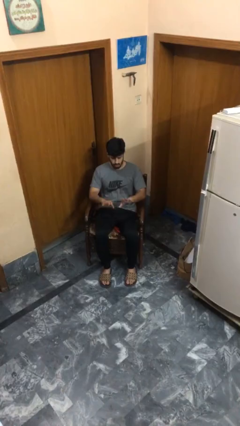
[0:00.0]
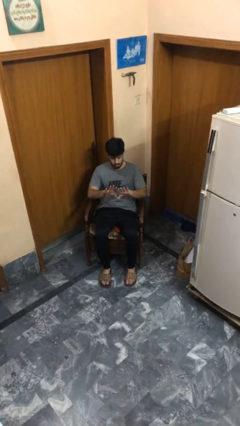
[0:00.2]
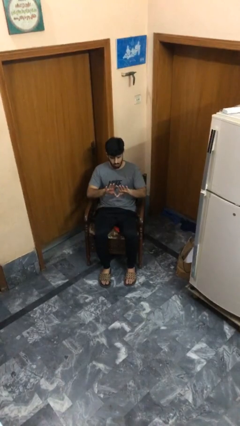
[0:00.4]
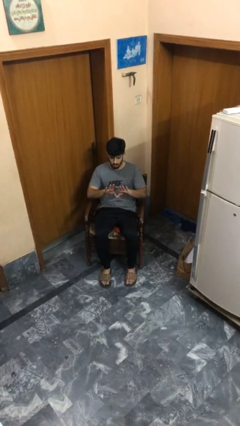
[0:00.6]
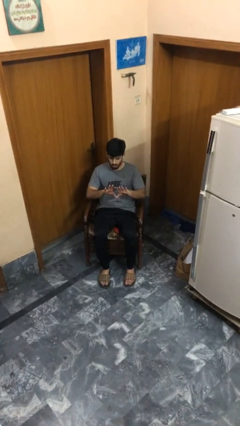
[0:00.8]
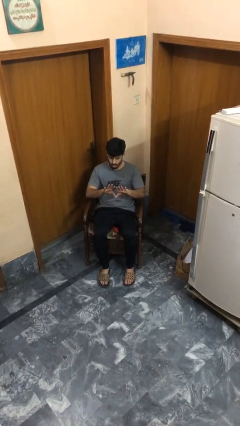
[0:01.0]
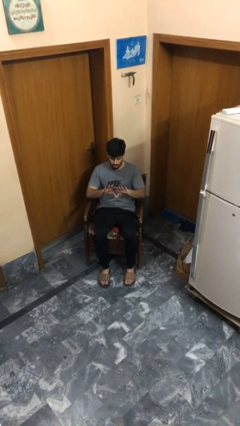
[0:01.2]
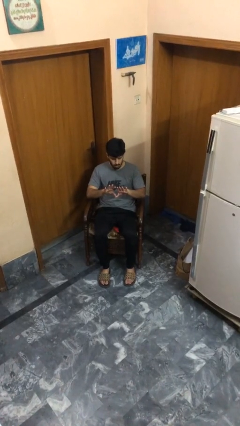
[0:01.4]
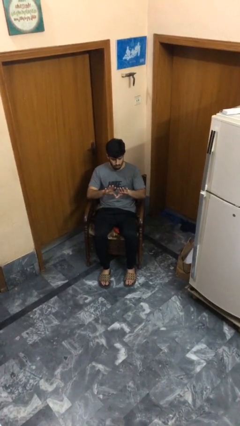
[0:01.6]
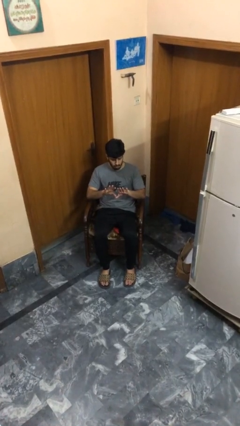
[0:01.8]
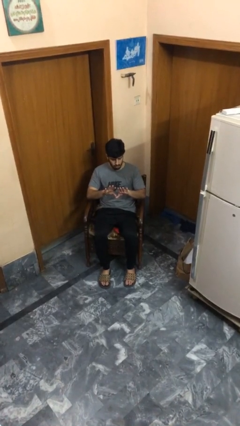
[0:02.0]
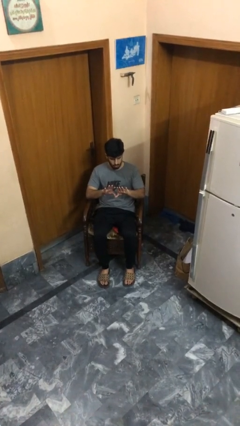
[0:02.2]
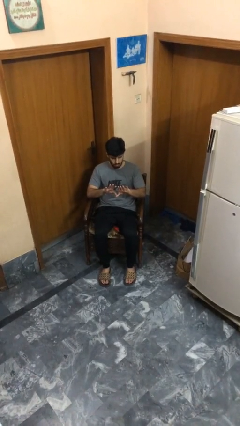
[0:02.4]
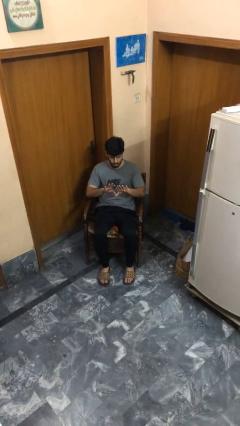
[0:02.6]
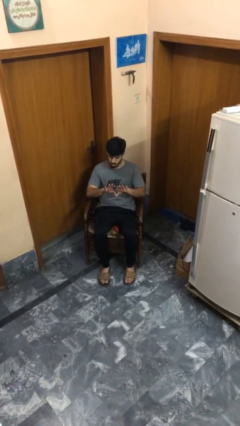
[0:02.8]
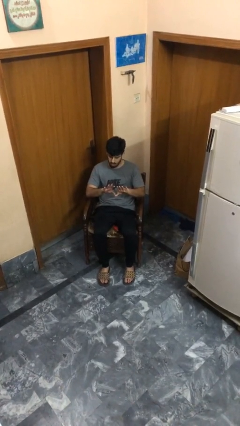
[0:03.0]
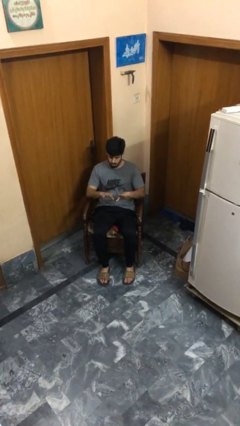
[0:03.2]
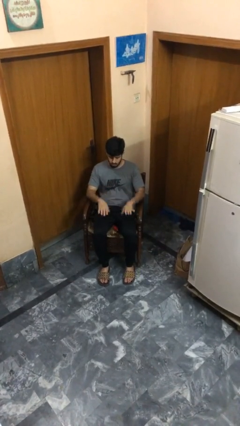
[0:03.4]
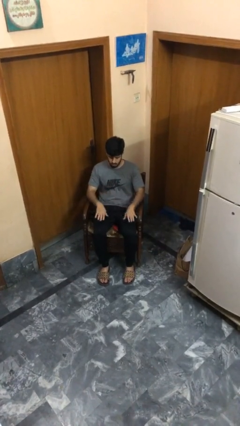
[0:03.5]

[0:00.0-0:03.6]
person looks at hands in lap

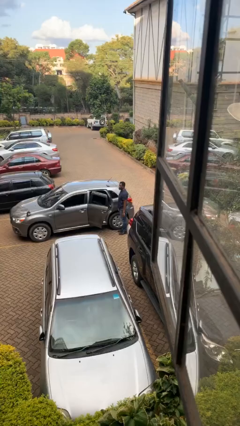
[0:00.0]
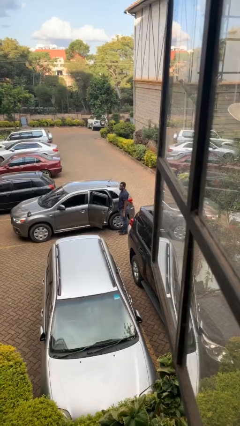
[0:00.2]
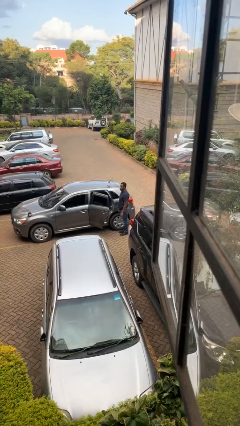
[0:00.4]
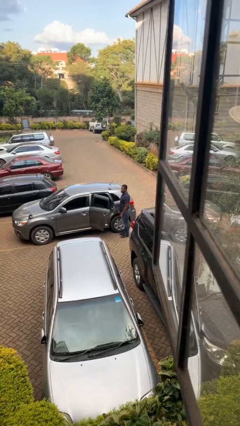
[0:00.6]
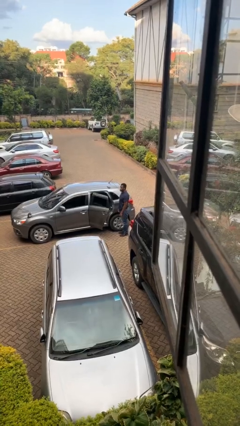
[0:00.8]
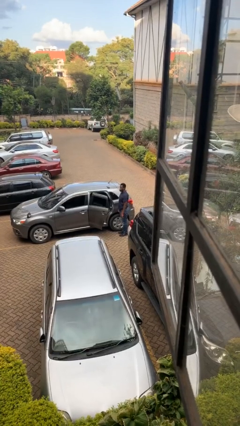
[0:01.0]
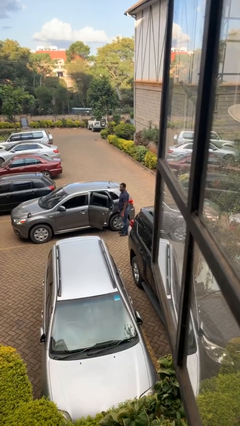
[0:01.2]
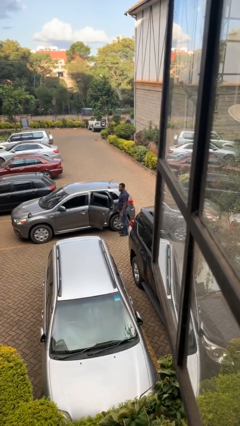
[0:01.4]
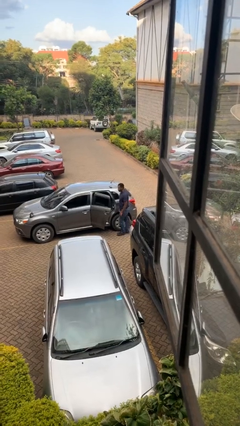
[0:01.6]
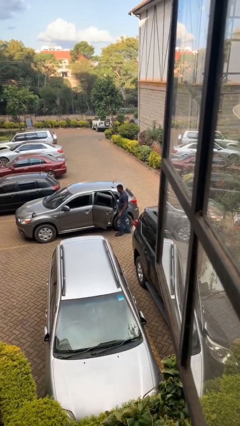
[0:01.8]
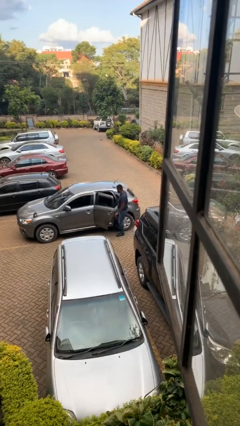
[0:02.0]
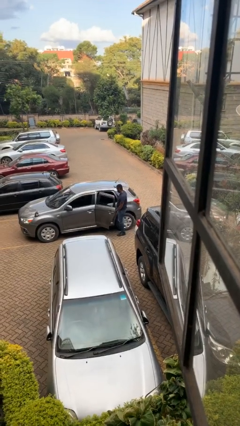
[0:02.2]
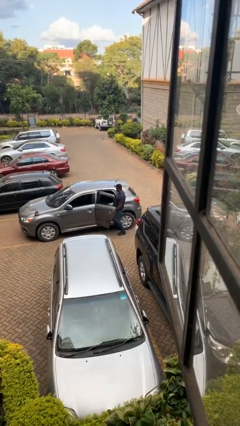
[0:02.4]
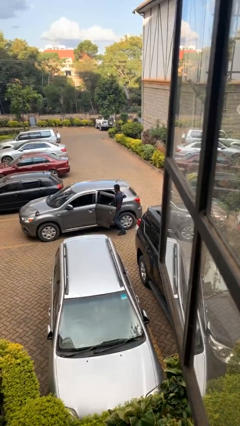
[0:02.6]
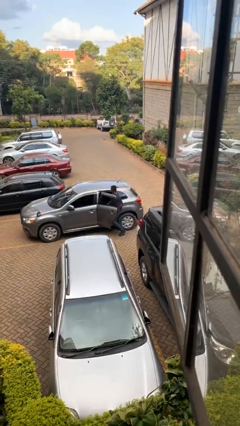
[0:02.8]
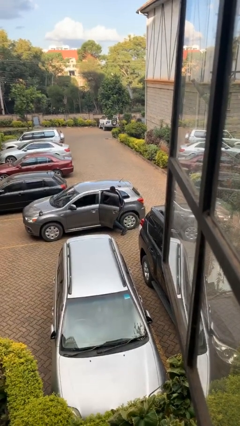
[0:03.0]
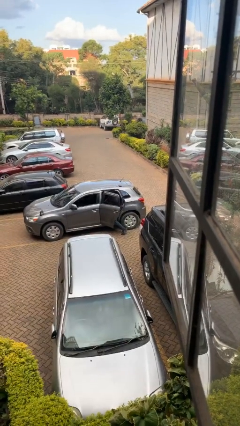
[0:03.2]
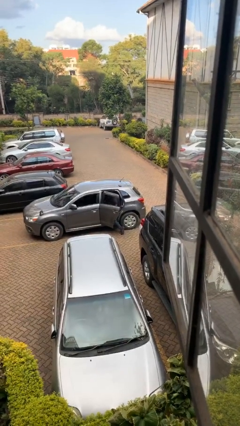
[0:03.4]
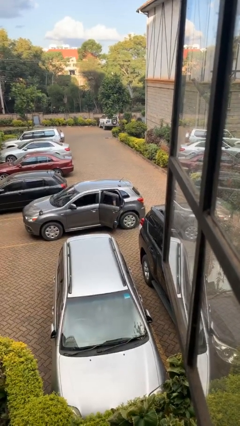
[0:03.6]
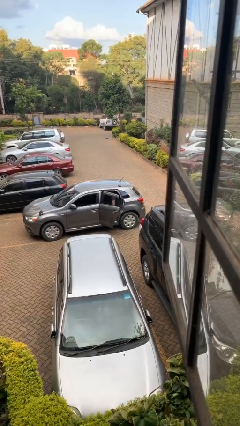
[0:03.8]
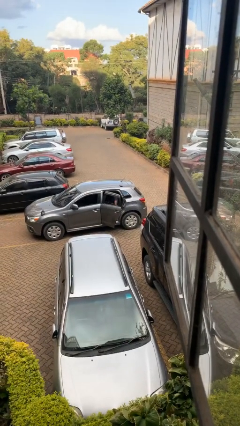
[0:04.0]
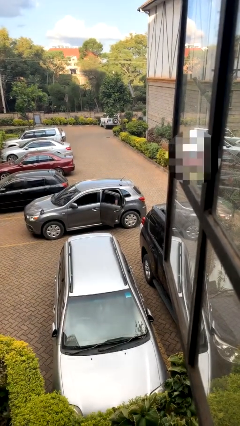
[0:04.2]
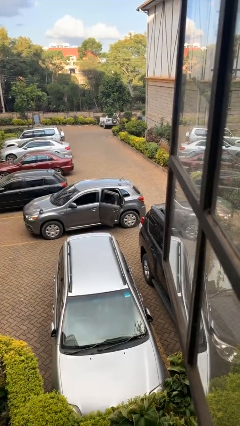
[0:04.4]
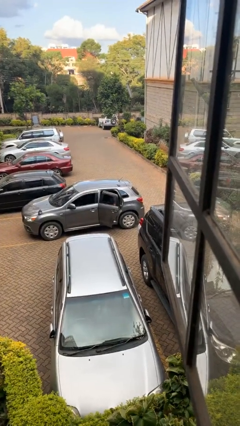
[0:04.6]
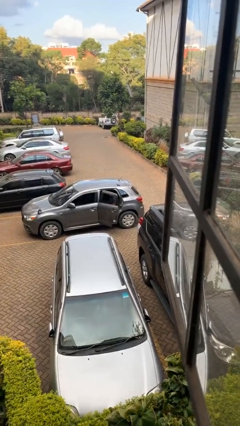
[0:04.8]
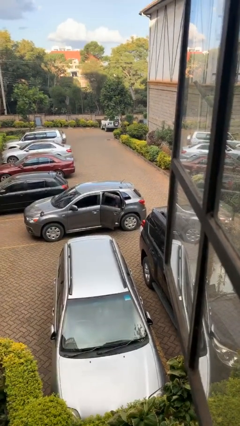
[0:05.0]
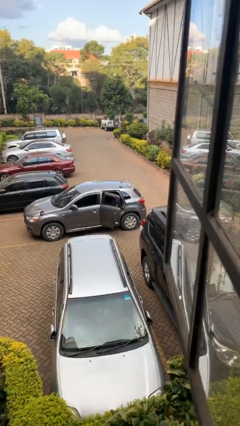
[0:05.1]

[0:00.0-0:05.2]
person enters car

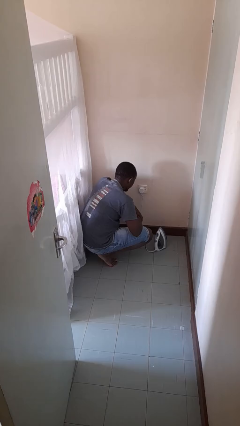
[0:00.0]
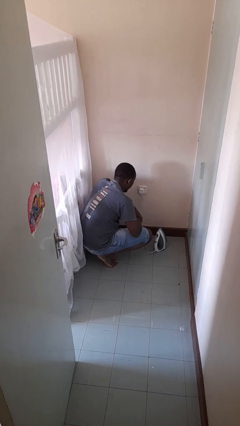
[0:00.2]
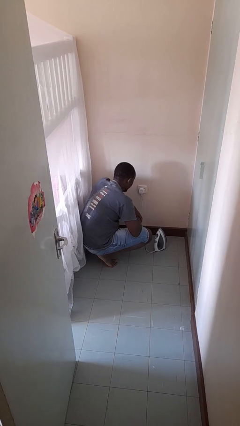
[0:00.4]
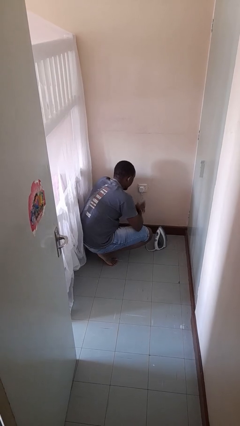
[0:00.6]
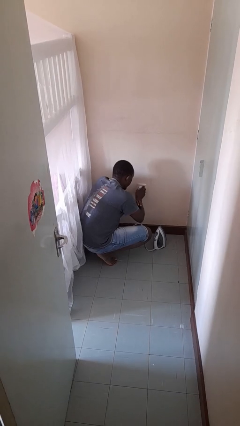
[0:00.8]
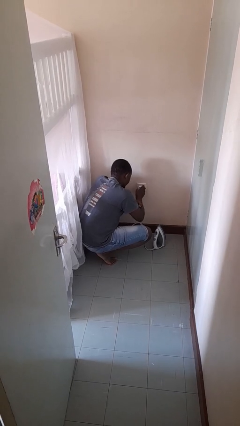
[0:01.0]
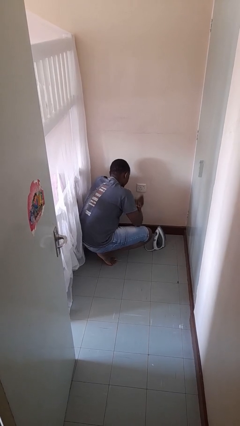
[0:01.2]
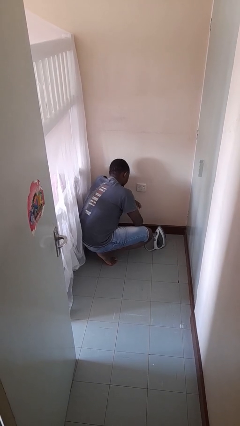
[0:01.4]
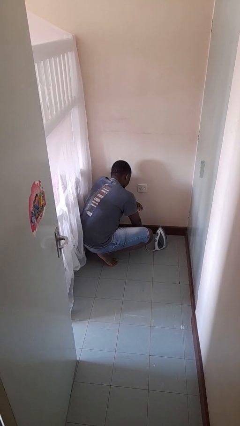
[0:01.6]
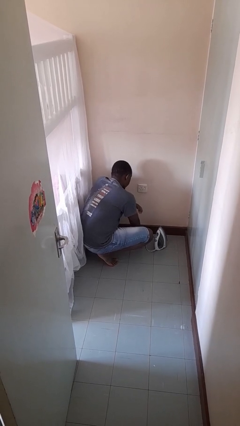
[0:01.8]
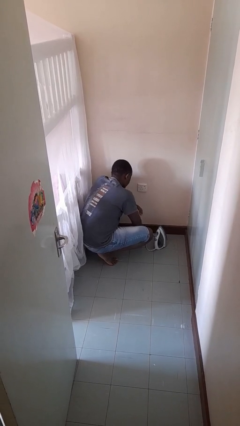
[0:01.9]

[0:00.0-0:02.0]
person unplugs from electrical socket

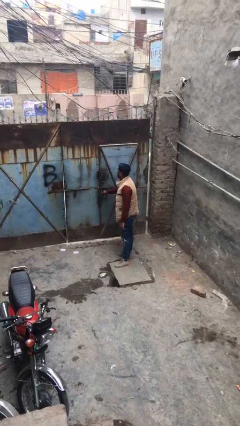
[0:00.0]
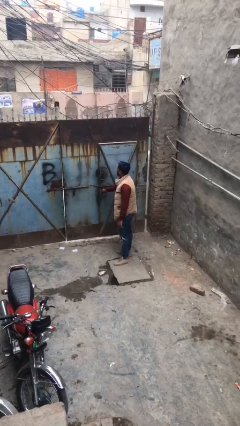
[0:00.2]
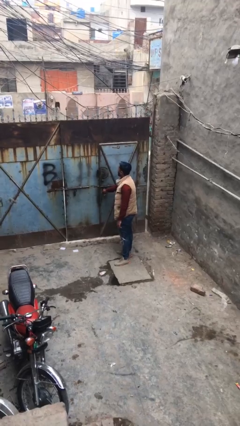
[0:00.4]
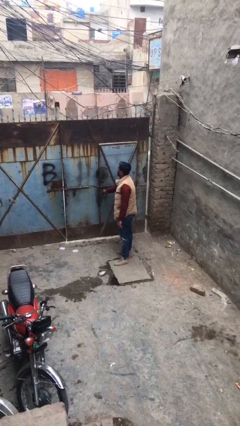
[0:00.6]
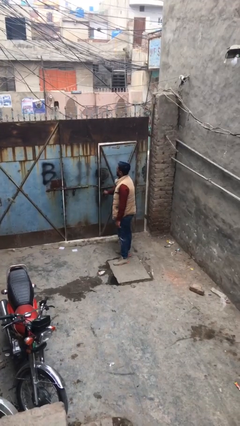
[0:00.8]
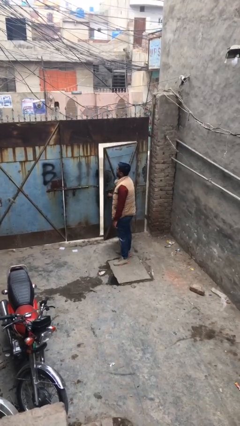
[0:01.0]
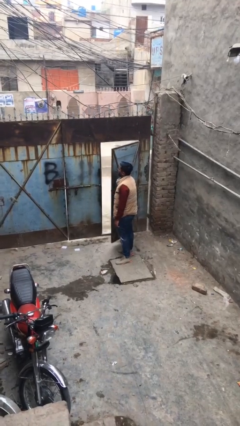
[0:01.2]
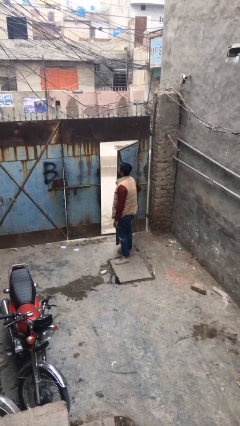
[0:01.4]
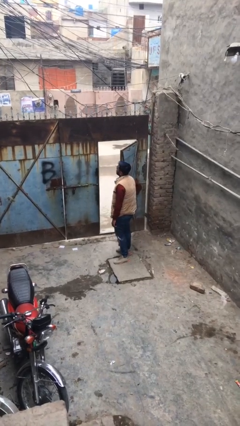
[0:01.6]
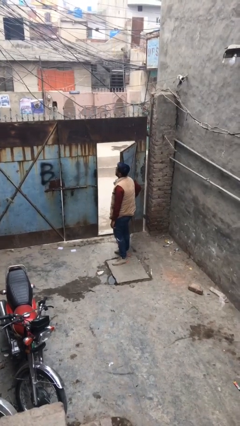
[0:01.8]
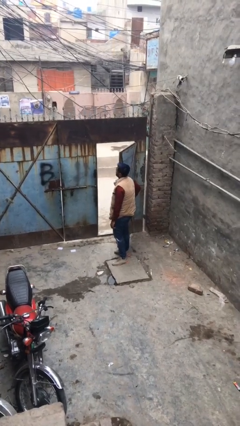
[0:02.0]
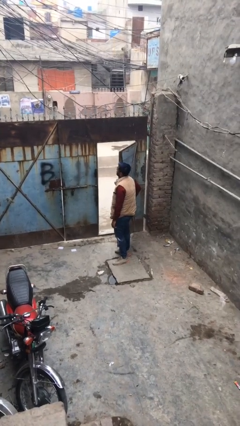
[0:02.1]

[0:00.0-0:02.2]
person opens facility door

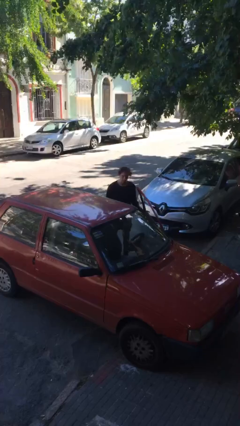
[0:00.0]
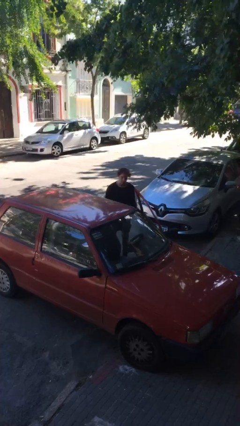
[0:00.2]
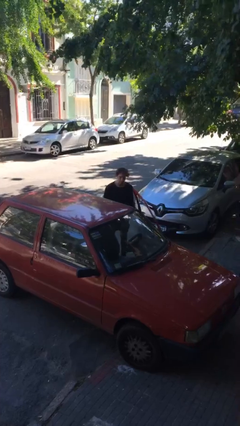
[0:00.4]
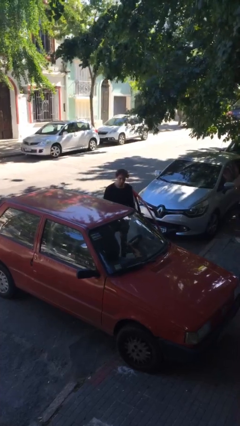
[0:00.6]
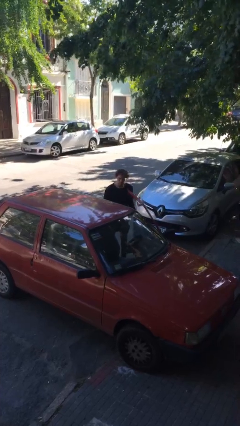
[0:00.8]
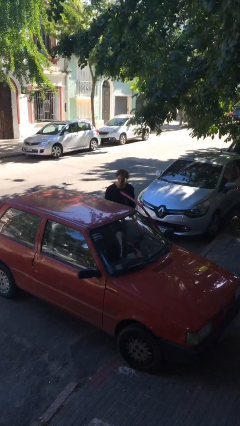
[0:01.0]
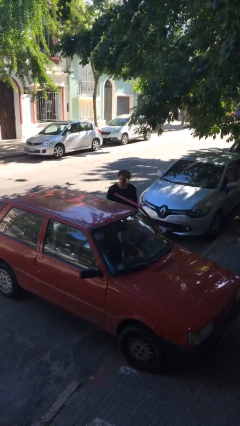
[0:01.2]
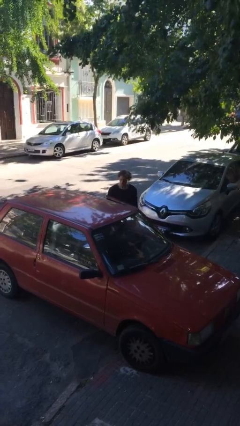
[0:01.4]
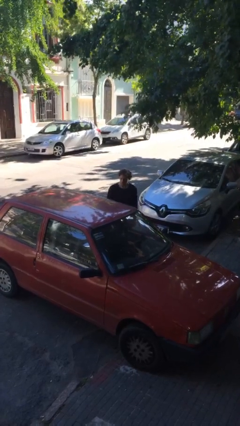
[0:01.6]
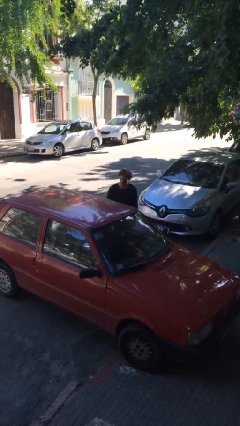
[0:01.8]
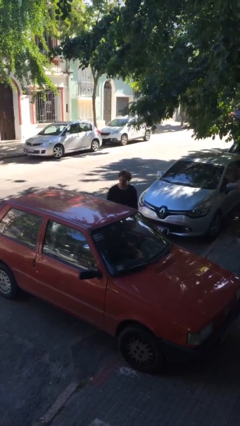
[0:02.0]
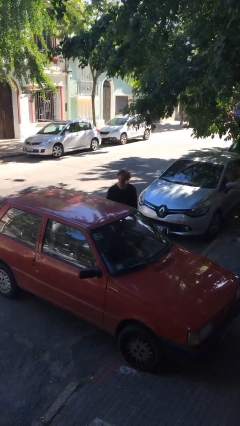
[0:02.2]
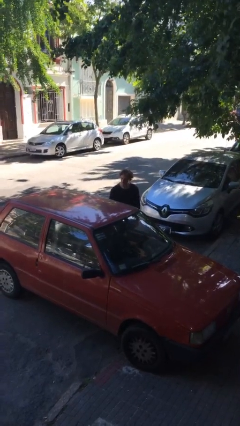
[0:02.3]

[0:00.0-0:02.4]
person closes car door

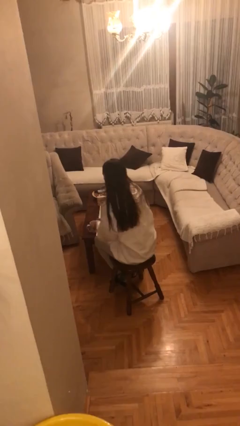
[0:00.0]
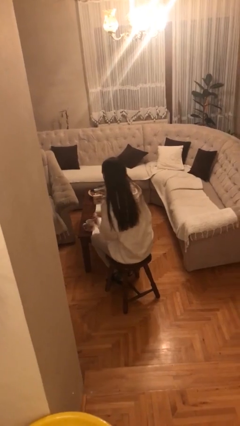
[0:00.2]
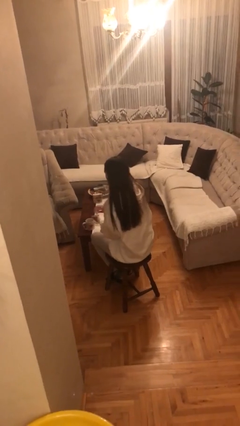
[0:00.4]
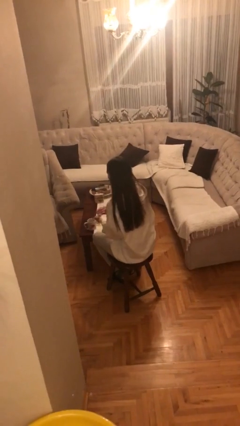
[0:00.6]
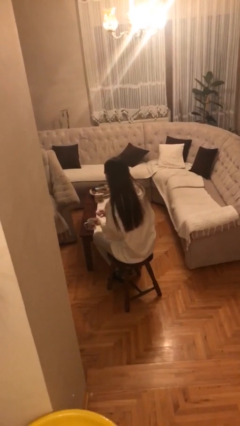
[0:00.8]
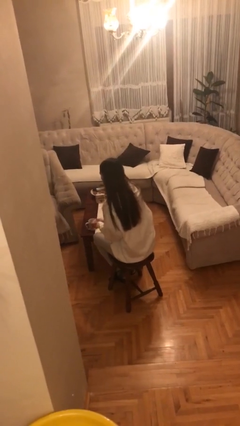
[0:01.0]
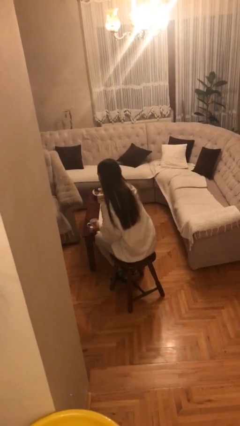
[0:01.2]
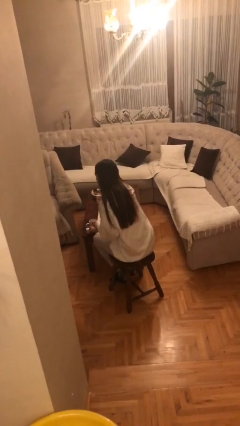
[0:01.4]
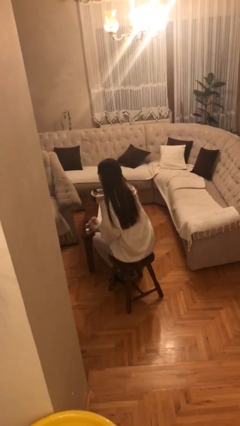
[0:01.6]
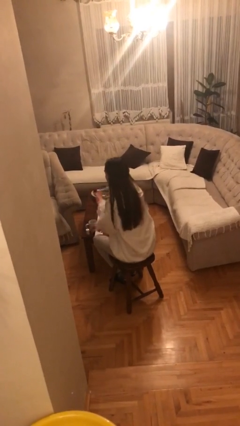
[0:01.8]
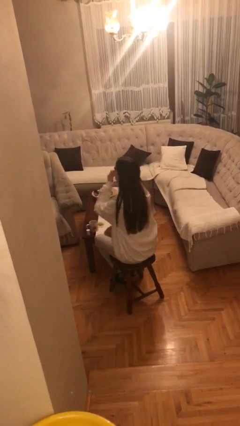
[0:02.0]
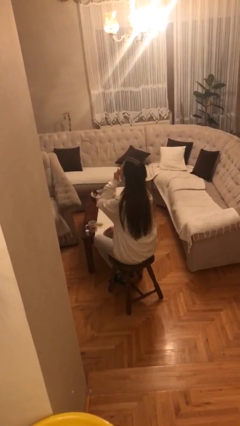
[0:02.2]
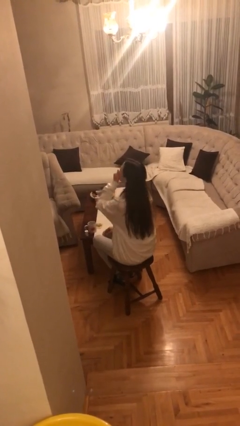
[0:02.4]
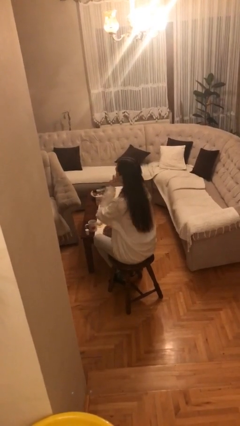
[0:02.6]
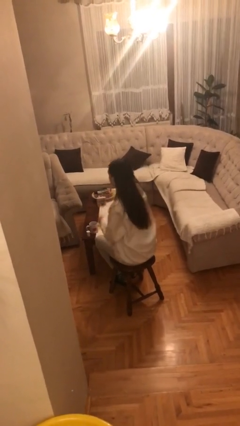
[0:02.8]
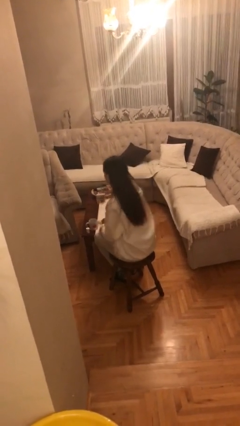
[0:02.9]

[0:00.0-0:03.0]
person takes medicine pills
